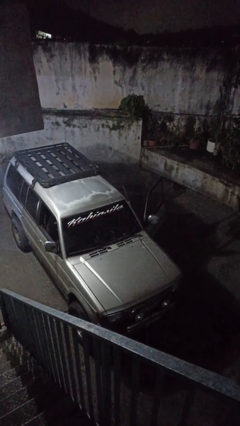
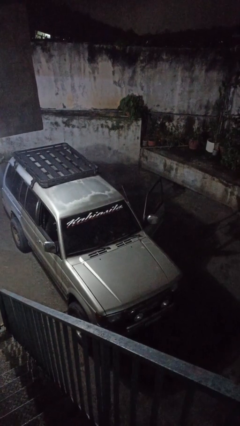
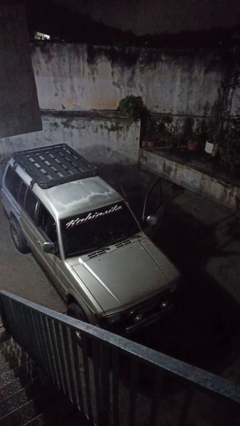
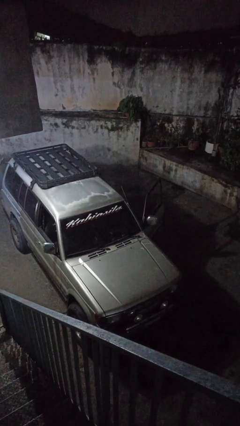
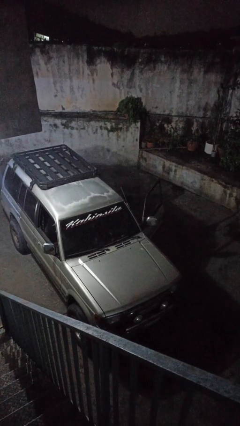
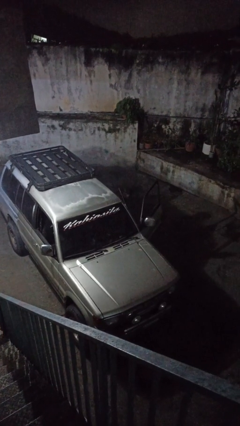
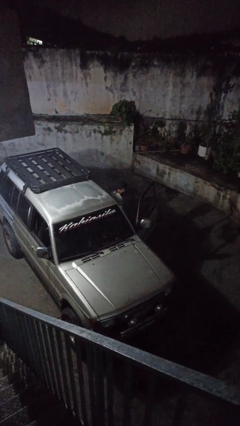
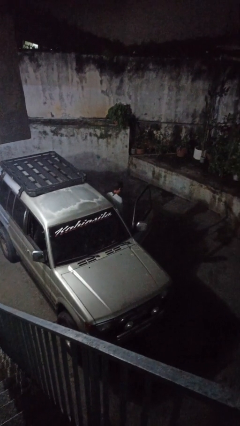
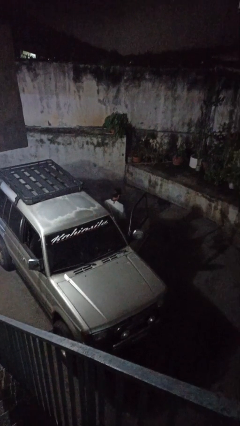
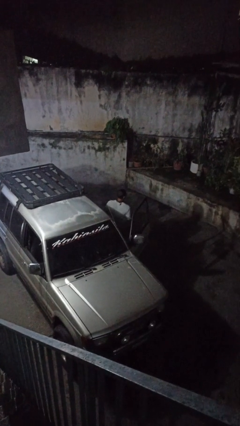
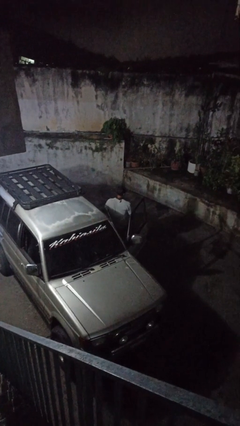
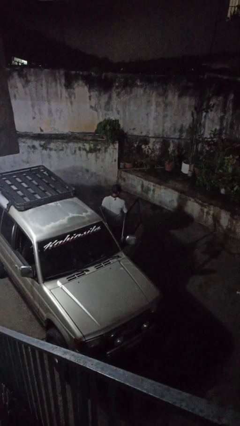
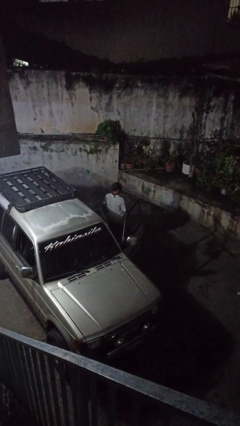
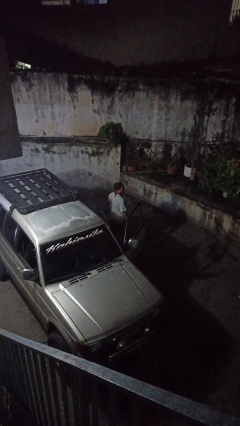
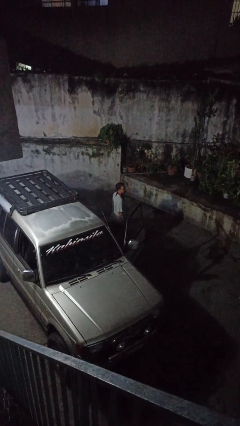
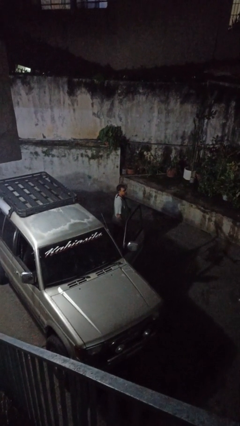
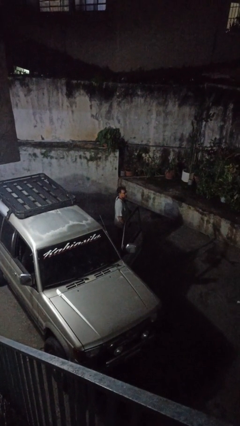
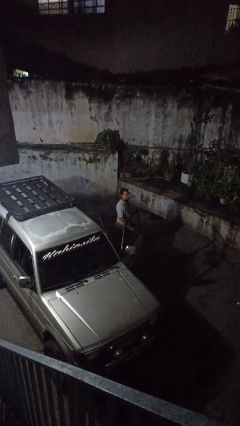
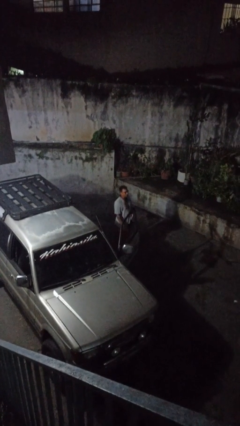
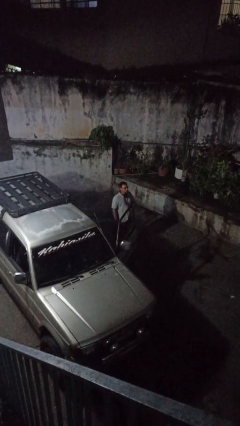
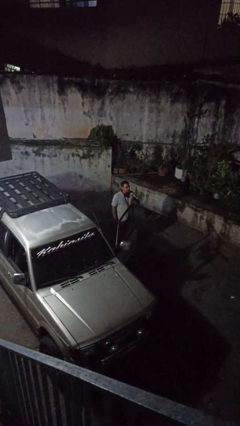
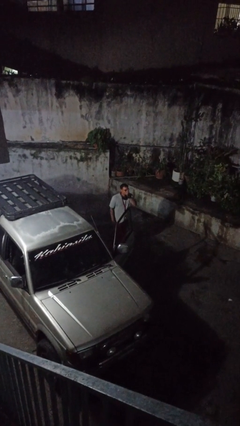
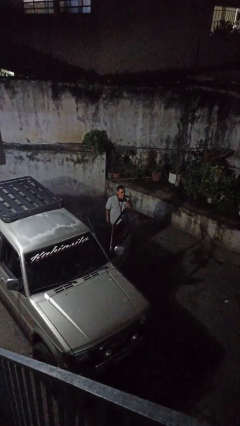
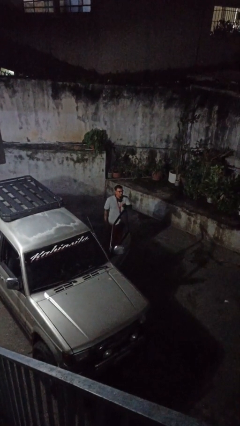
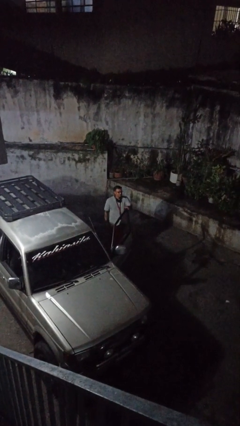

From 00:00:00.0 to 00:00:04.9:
person exits car

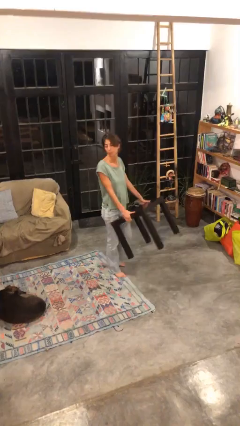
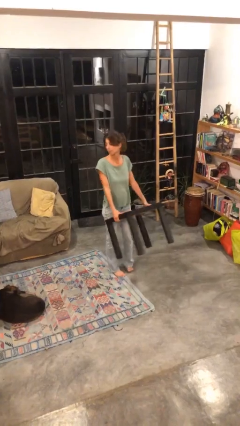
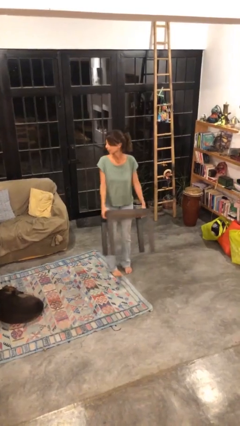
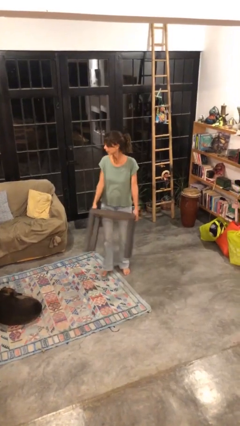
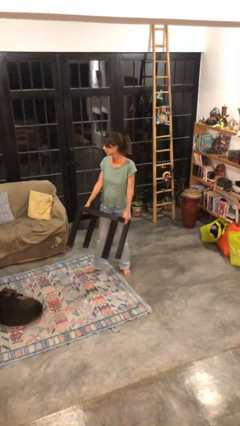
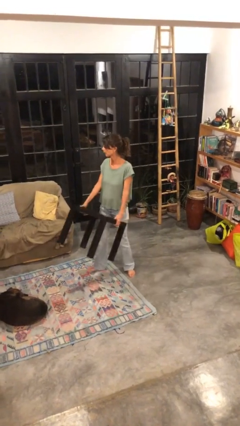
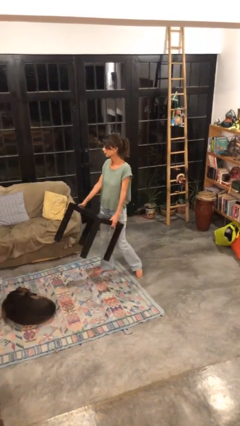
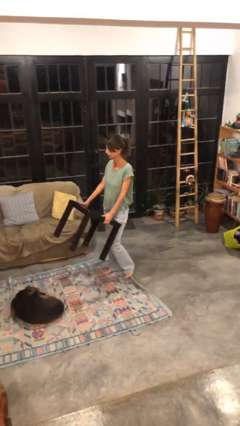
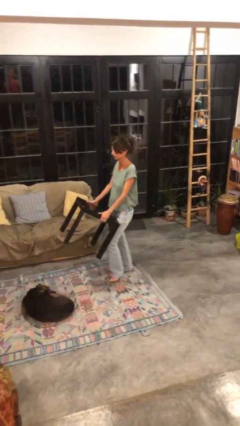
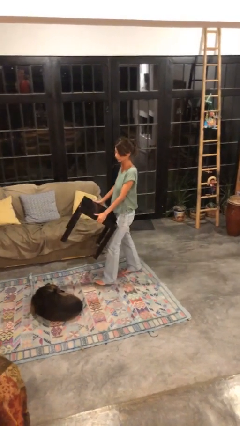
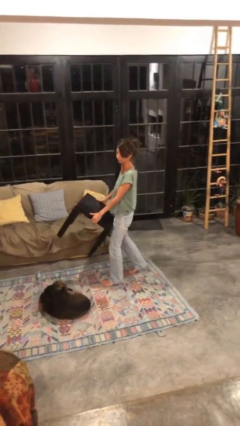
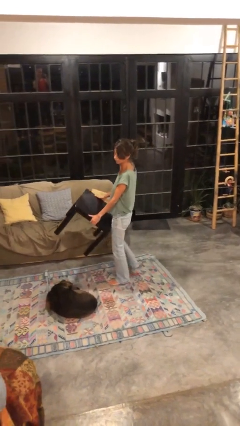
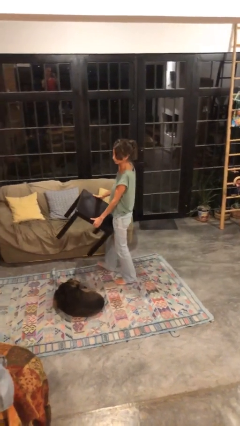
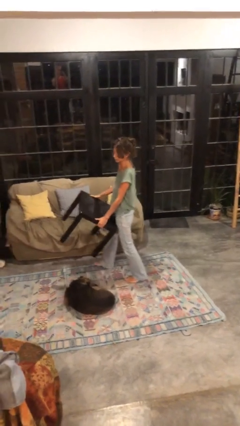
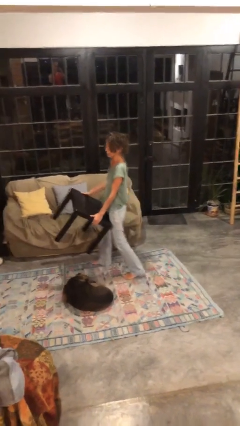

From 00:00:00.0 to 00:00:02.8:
person carries furniture

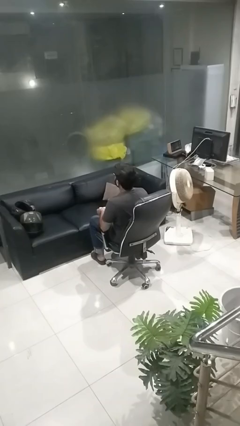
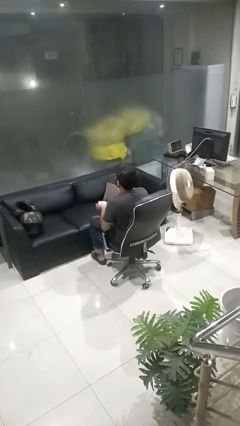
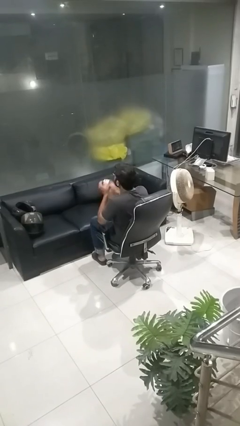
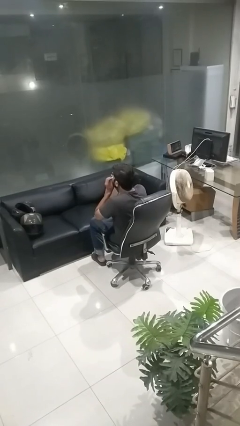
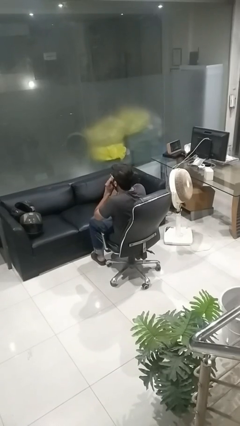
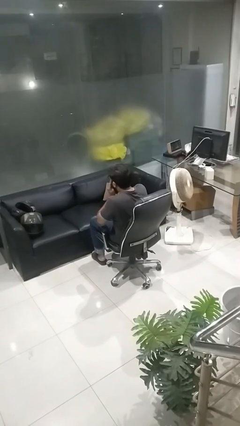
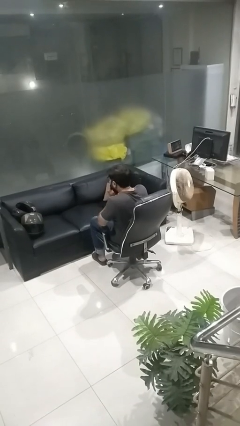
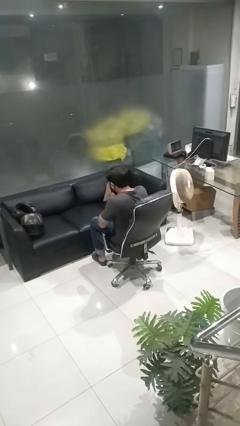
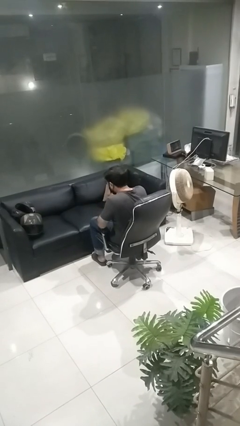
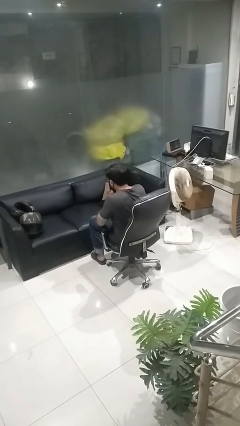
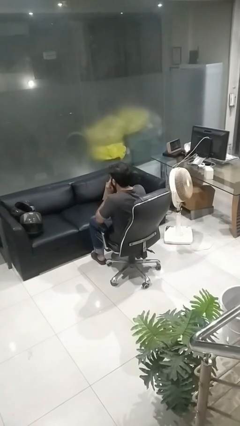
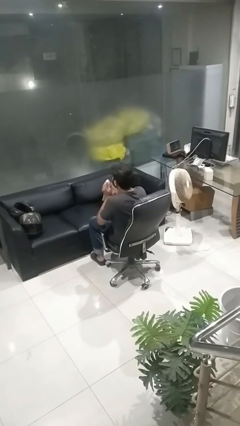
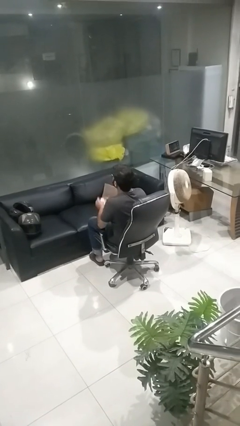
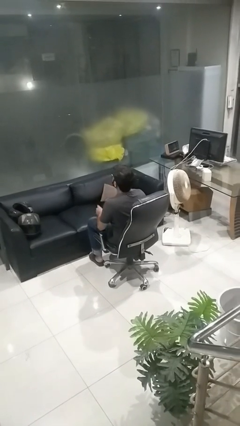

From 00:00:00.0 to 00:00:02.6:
person blows nose

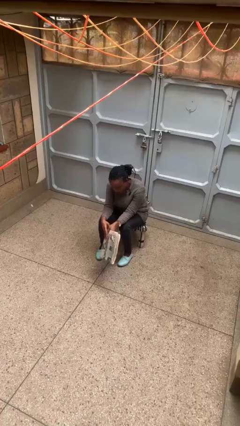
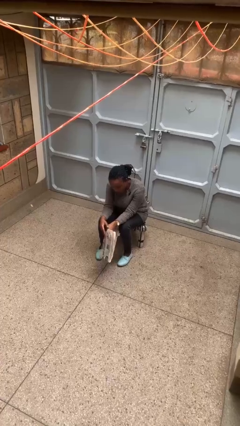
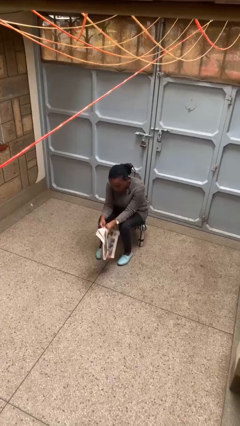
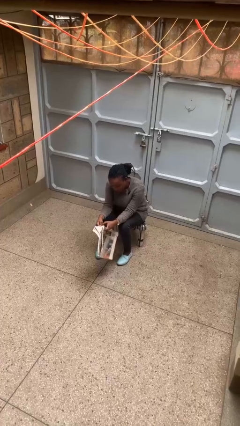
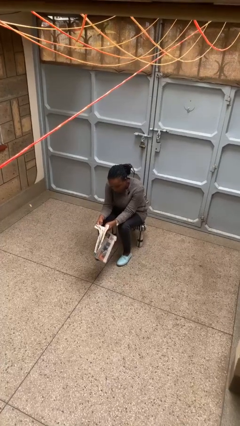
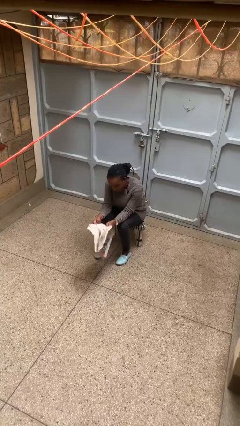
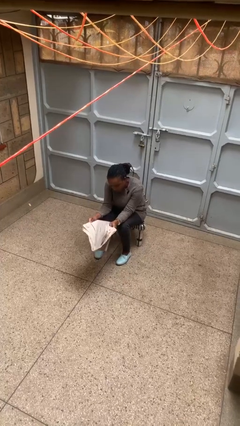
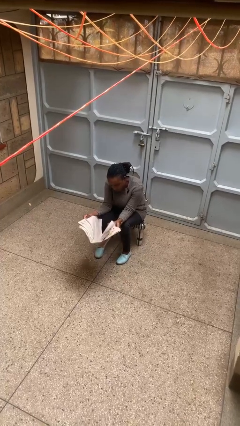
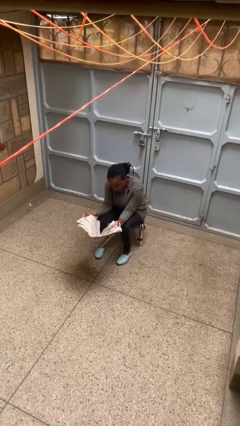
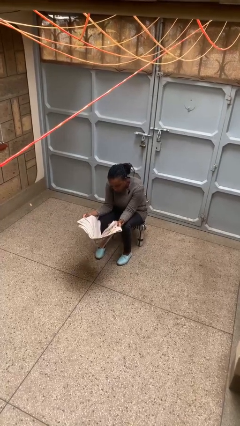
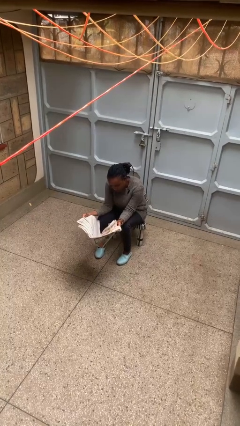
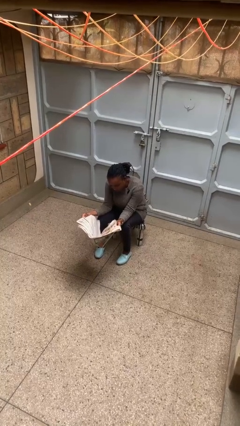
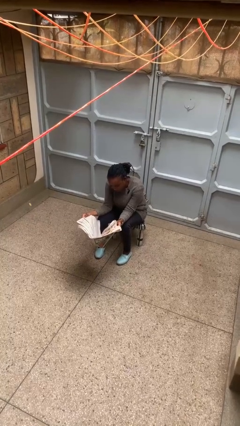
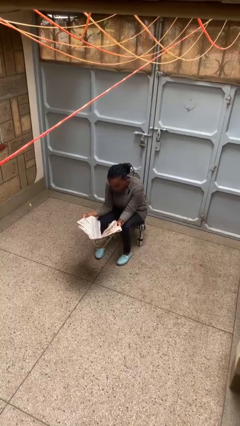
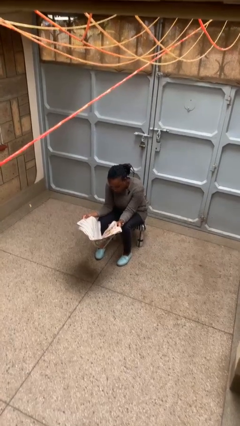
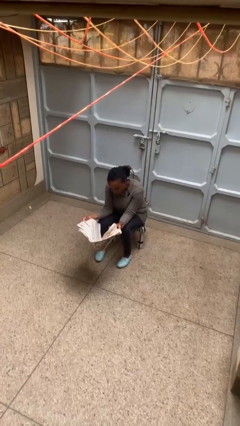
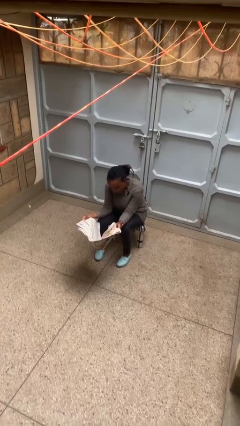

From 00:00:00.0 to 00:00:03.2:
person reads newspaper

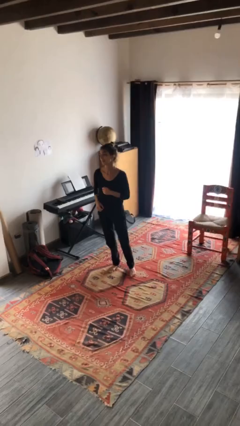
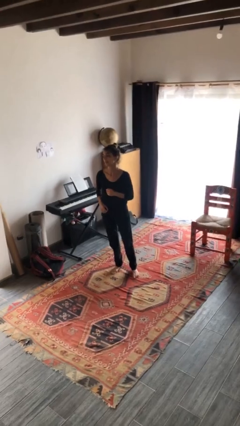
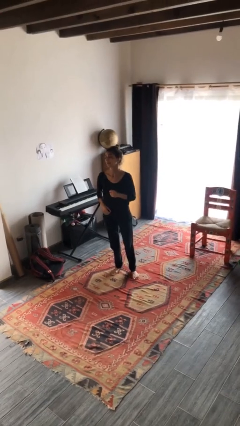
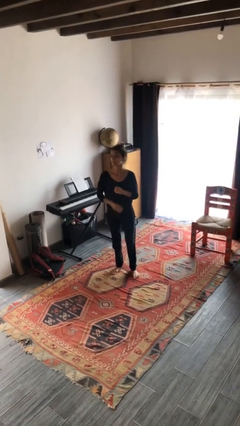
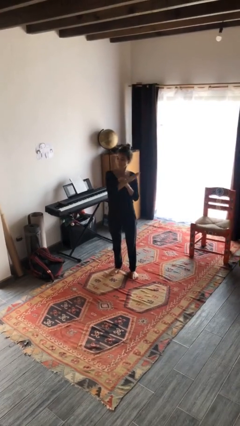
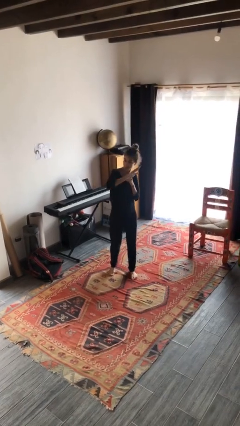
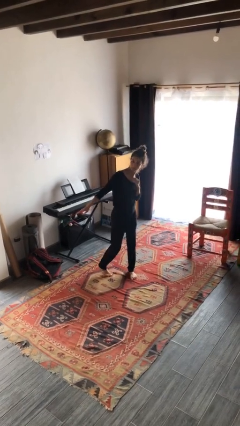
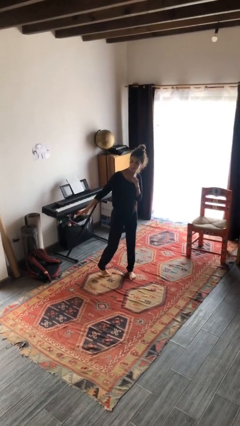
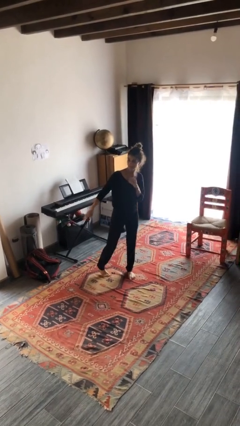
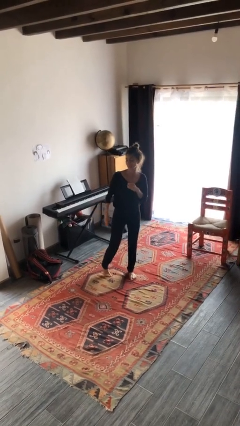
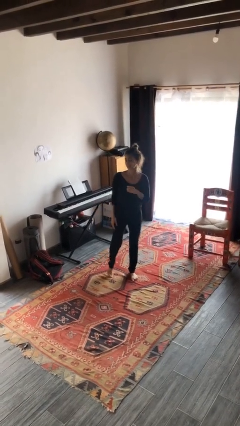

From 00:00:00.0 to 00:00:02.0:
person karate chop

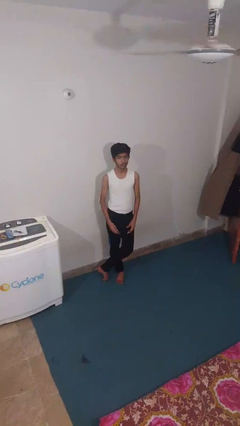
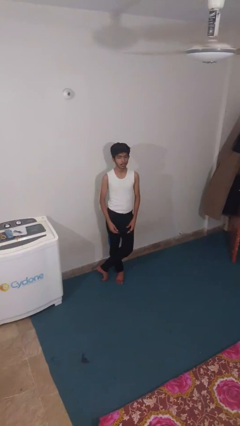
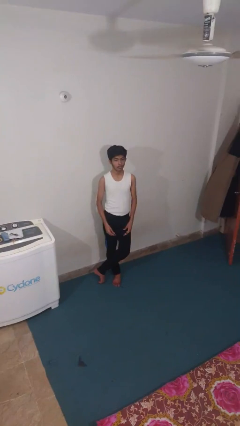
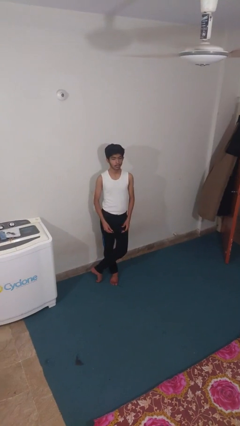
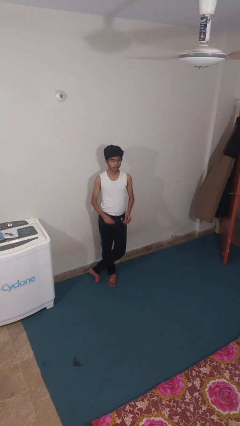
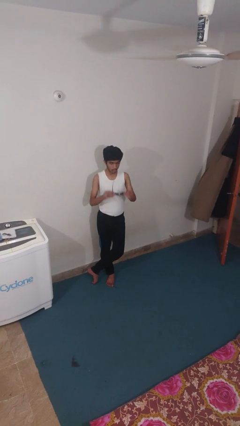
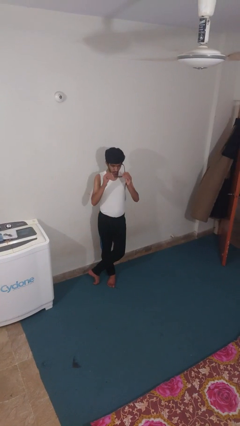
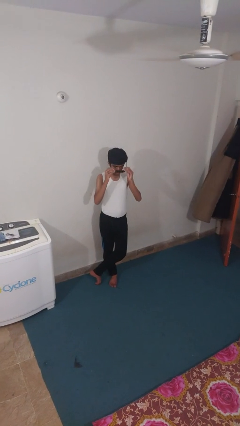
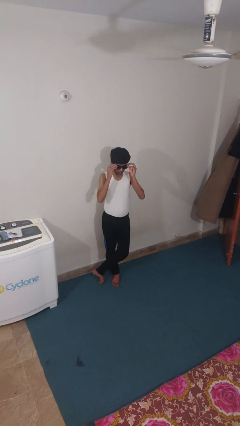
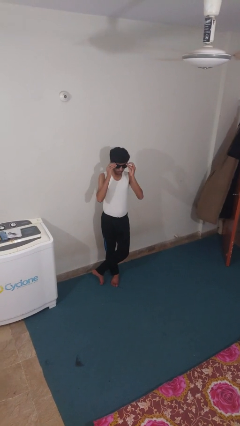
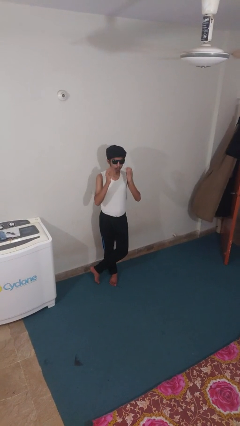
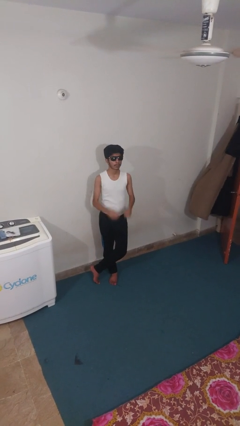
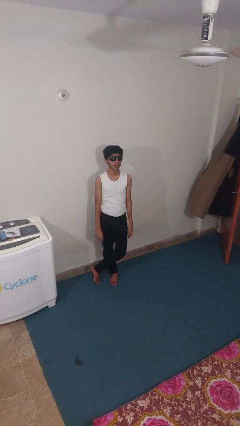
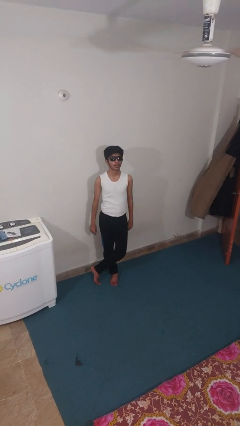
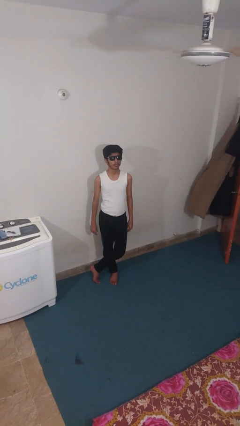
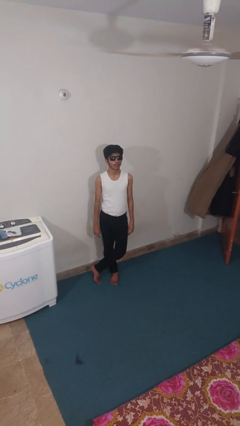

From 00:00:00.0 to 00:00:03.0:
person puts on sunglasses
